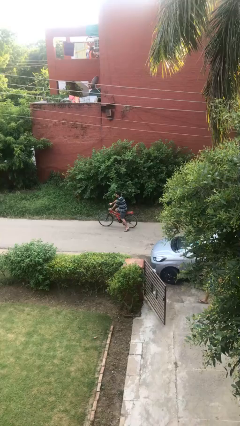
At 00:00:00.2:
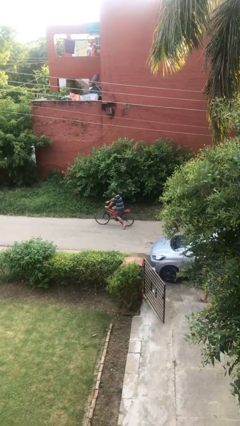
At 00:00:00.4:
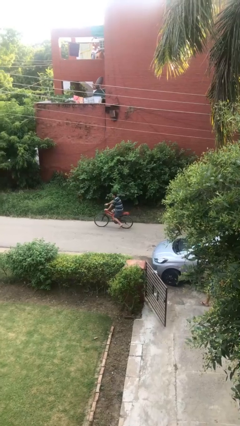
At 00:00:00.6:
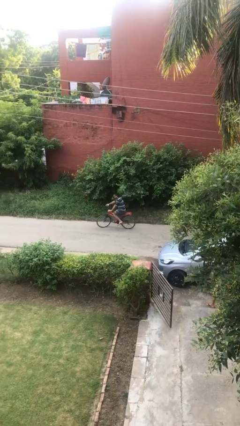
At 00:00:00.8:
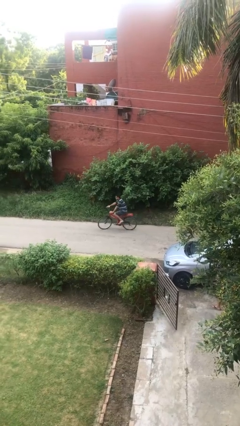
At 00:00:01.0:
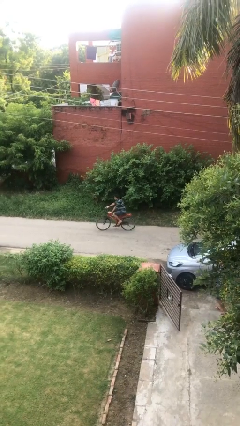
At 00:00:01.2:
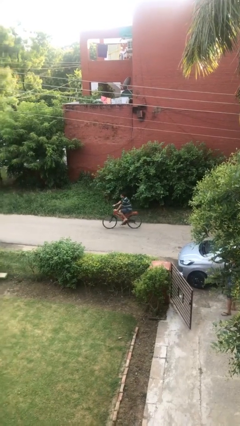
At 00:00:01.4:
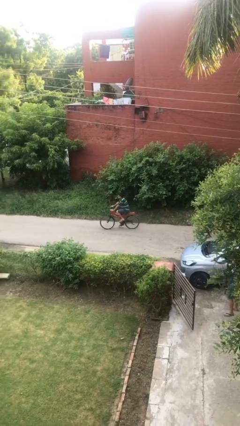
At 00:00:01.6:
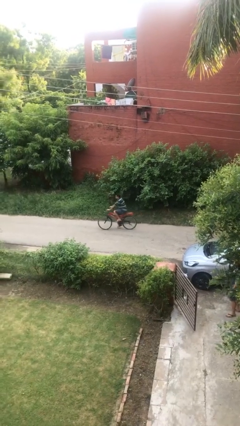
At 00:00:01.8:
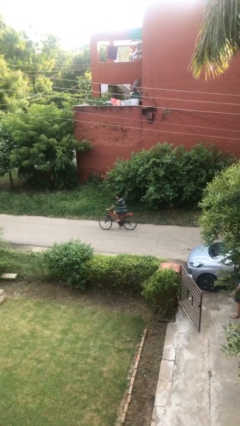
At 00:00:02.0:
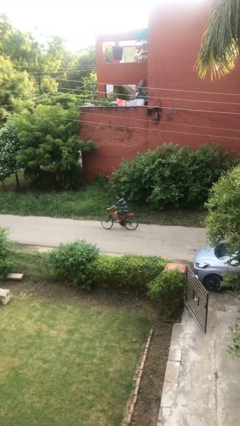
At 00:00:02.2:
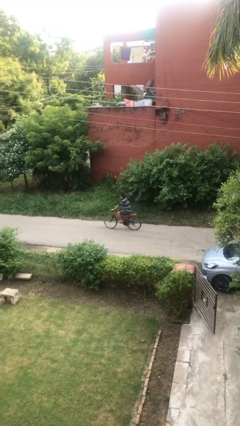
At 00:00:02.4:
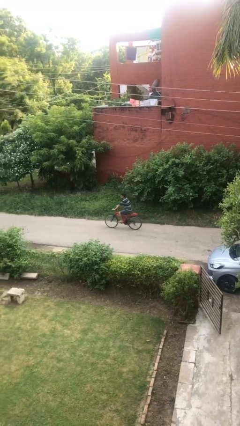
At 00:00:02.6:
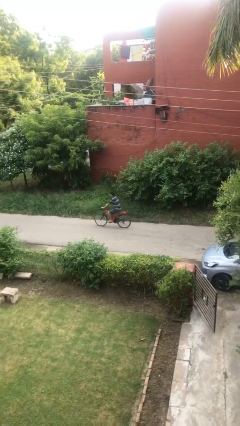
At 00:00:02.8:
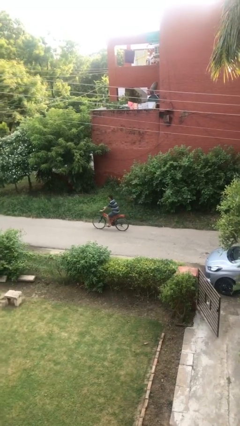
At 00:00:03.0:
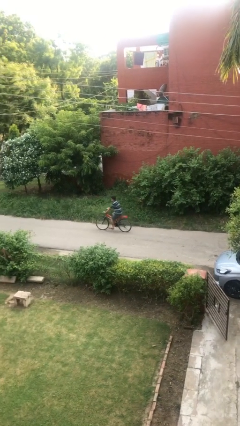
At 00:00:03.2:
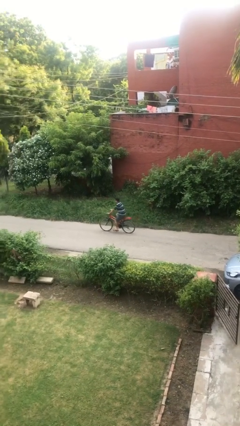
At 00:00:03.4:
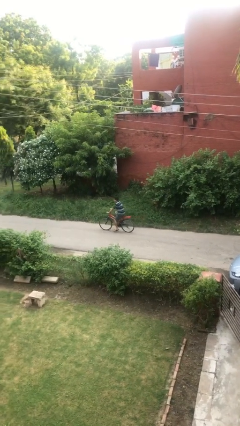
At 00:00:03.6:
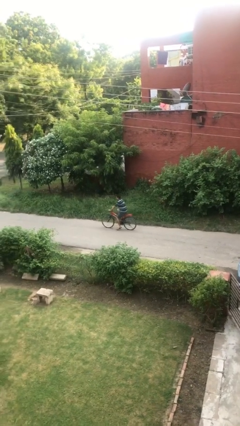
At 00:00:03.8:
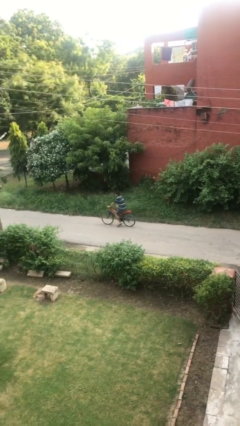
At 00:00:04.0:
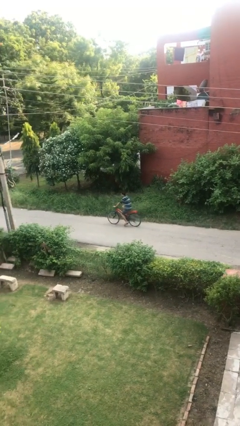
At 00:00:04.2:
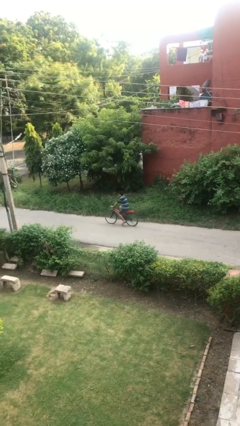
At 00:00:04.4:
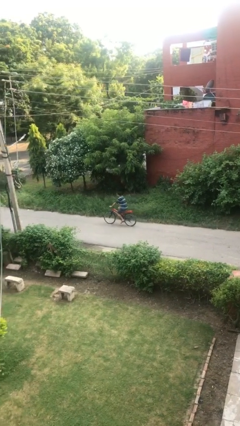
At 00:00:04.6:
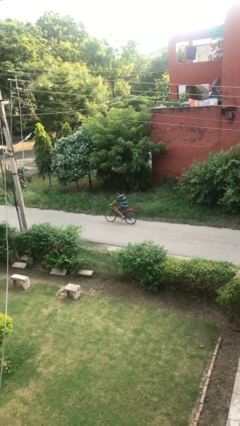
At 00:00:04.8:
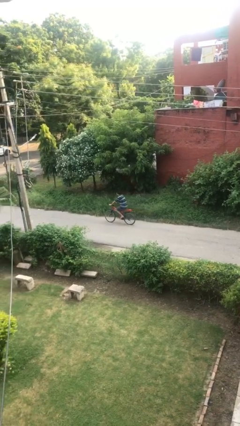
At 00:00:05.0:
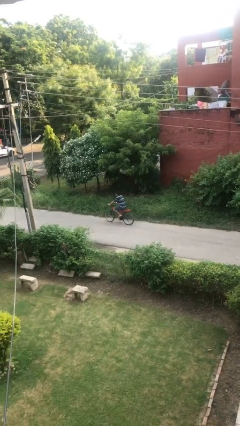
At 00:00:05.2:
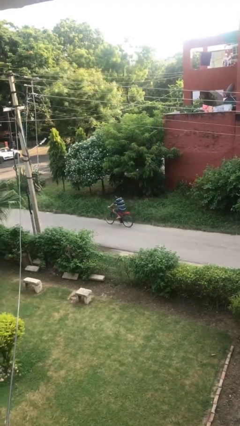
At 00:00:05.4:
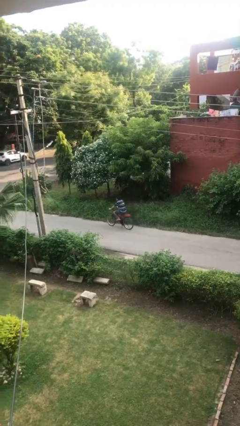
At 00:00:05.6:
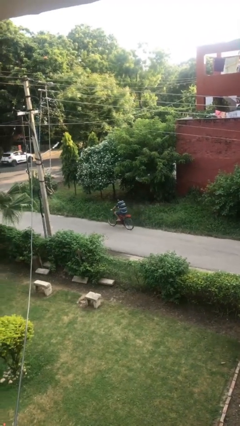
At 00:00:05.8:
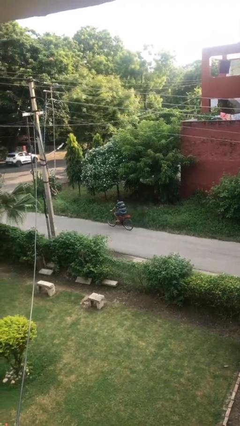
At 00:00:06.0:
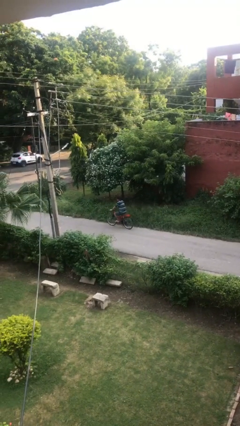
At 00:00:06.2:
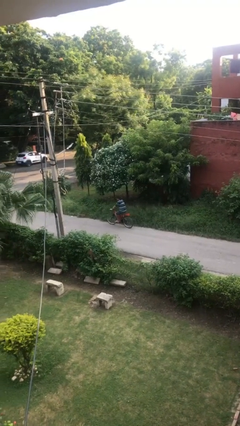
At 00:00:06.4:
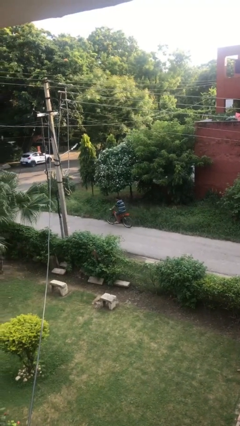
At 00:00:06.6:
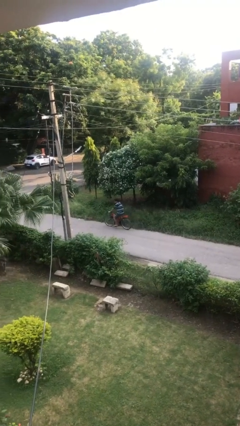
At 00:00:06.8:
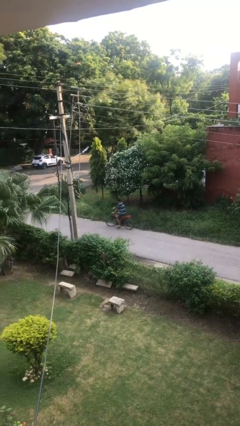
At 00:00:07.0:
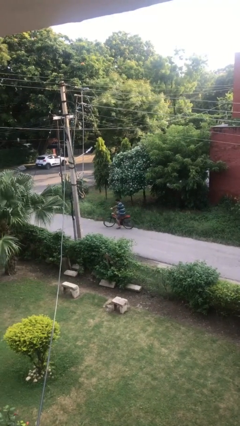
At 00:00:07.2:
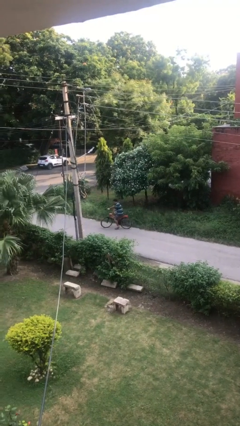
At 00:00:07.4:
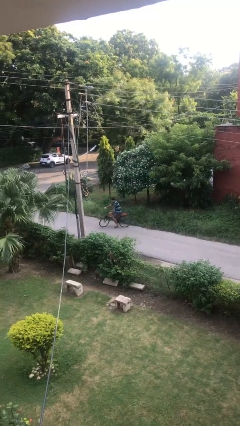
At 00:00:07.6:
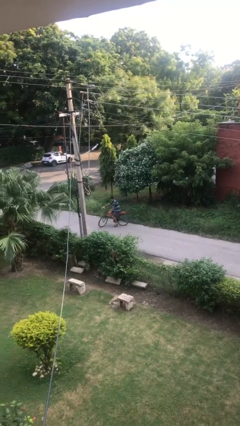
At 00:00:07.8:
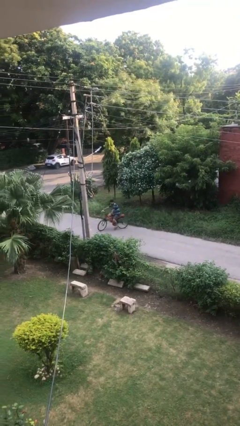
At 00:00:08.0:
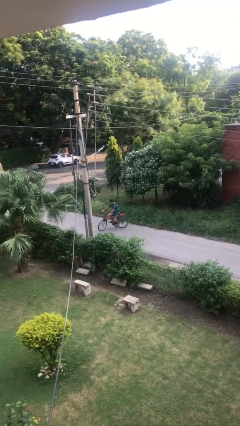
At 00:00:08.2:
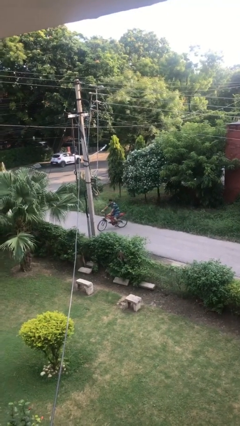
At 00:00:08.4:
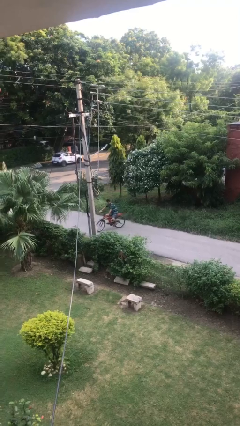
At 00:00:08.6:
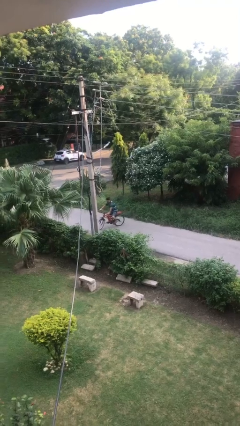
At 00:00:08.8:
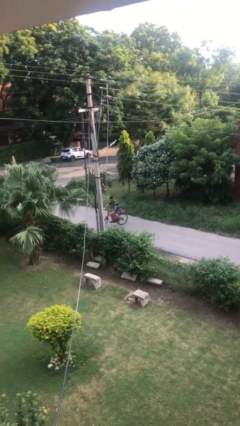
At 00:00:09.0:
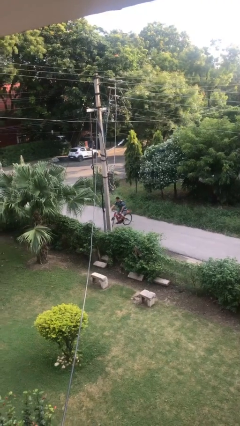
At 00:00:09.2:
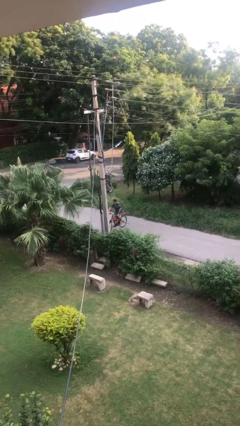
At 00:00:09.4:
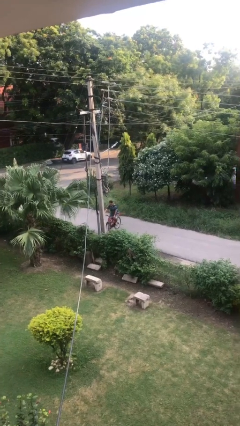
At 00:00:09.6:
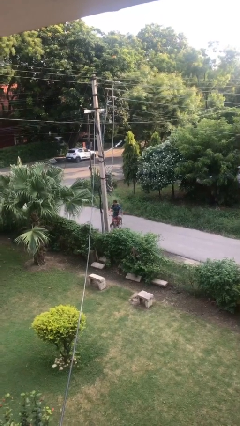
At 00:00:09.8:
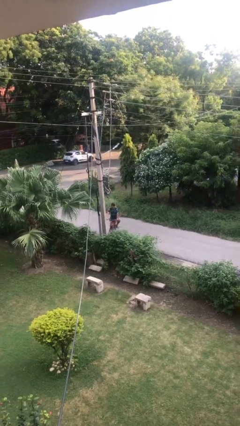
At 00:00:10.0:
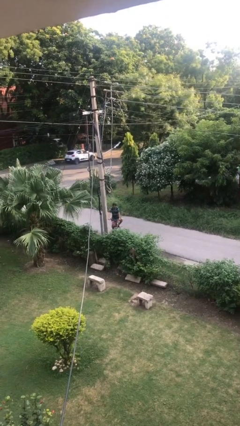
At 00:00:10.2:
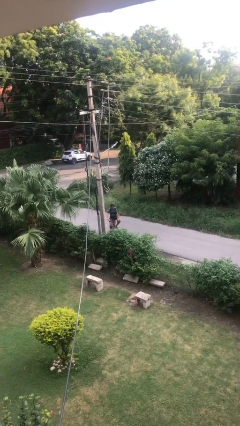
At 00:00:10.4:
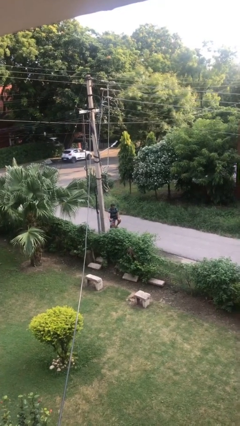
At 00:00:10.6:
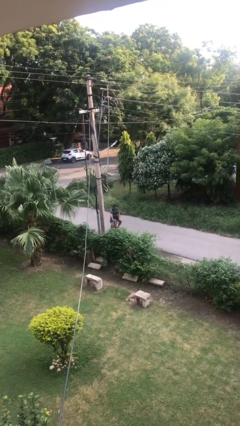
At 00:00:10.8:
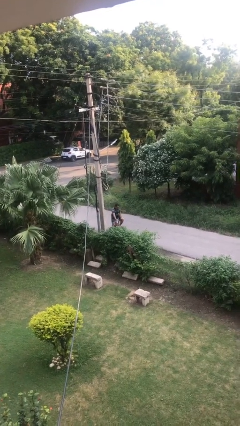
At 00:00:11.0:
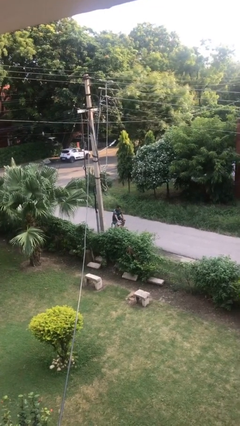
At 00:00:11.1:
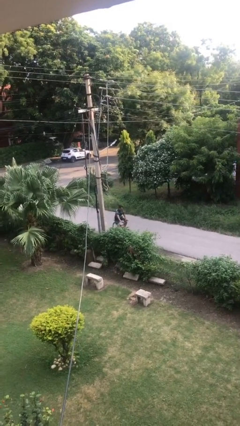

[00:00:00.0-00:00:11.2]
person rides bicycle

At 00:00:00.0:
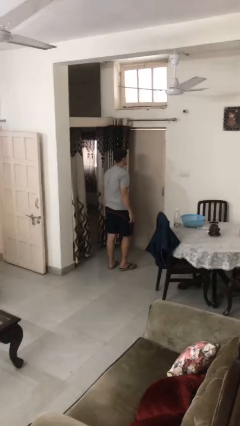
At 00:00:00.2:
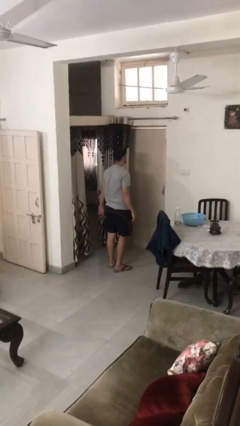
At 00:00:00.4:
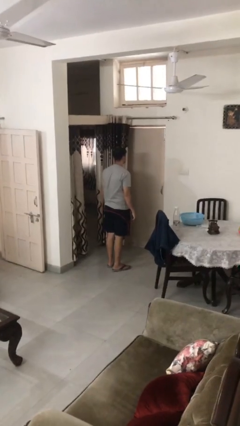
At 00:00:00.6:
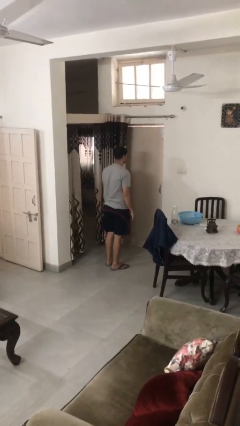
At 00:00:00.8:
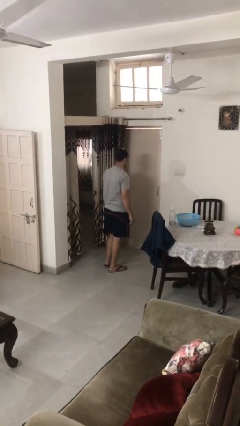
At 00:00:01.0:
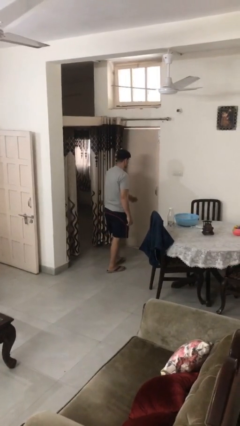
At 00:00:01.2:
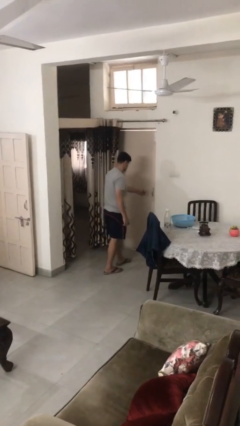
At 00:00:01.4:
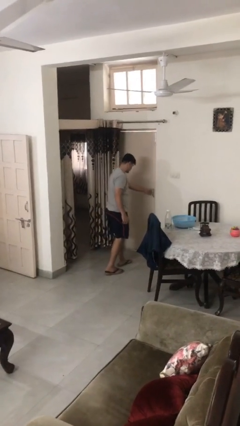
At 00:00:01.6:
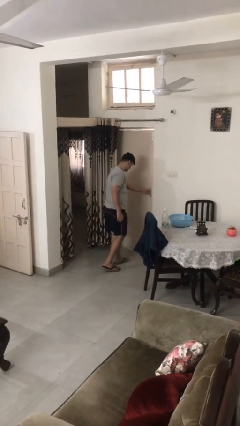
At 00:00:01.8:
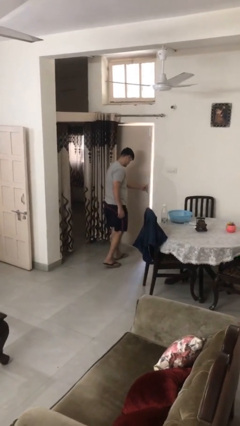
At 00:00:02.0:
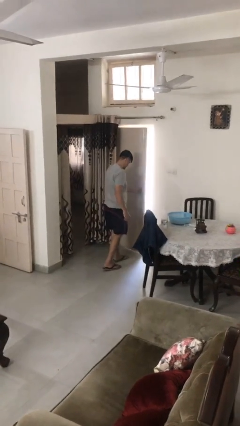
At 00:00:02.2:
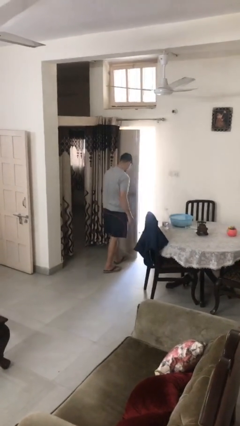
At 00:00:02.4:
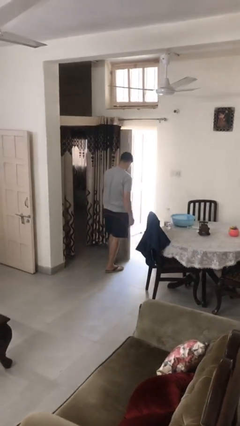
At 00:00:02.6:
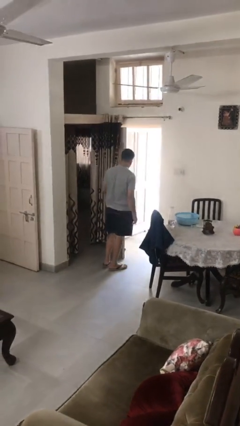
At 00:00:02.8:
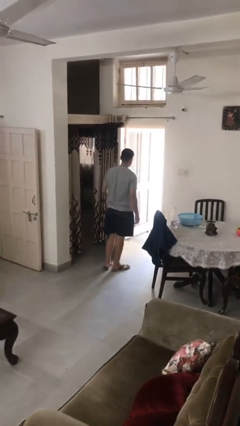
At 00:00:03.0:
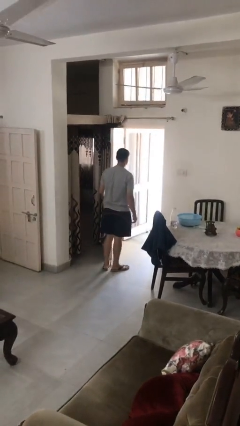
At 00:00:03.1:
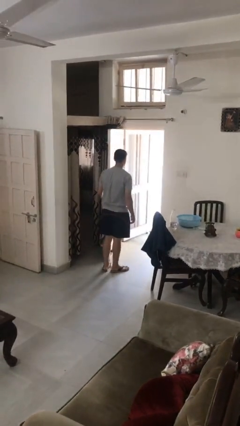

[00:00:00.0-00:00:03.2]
person opens facility door

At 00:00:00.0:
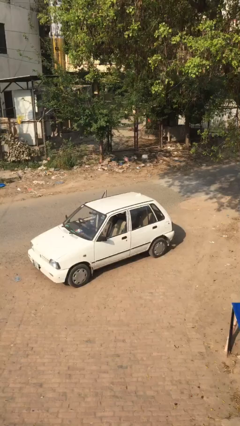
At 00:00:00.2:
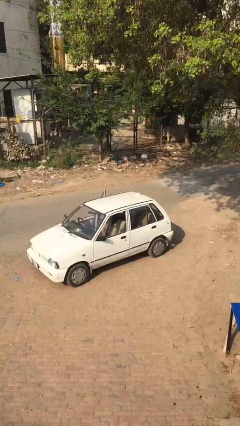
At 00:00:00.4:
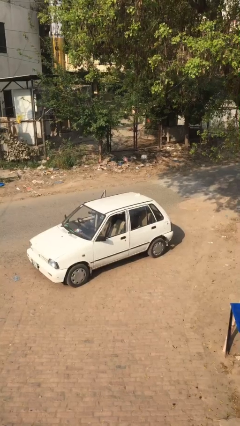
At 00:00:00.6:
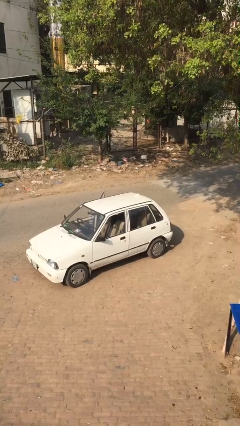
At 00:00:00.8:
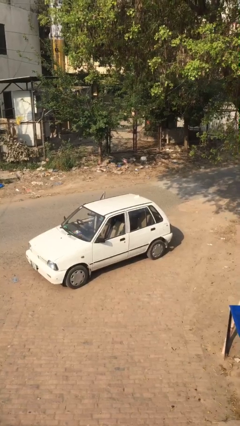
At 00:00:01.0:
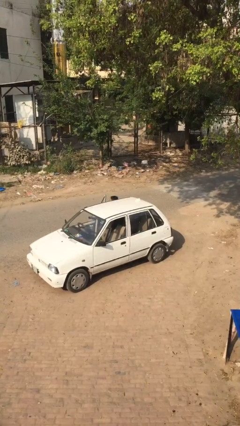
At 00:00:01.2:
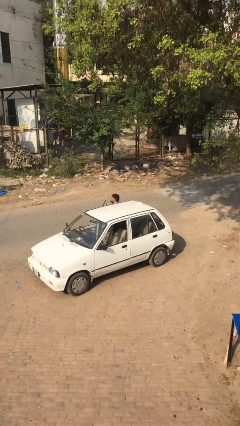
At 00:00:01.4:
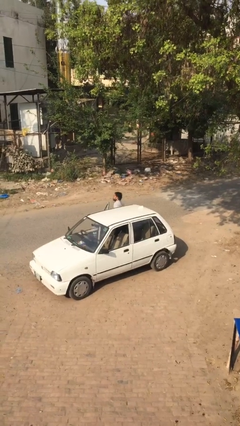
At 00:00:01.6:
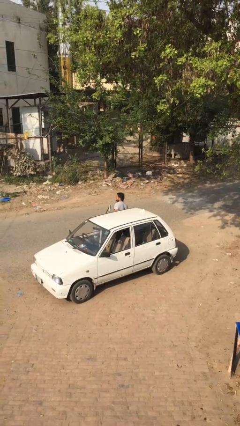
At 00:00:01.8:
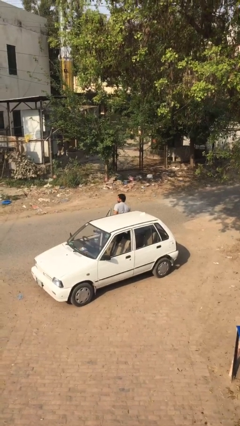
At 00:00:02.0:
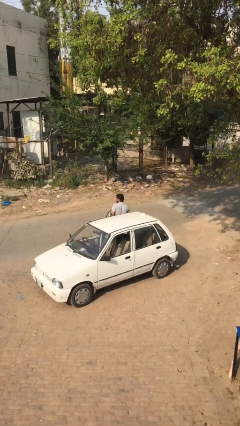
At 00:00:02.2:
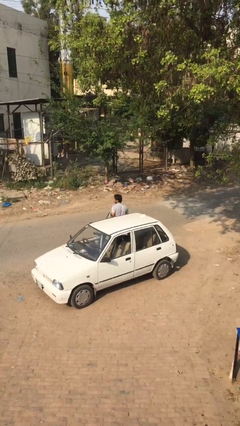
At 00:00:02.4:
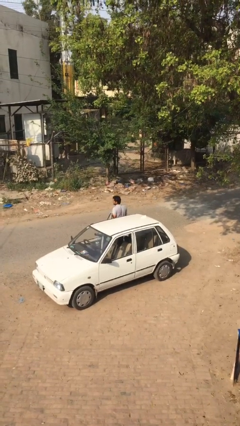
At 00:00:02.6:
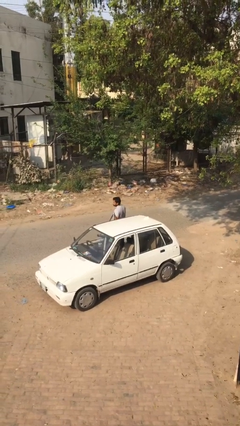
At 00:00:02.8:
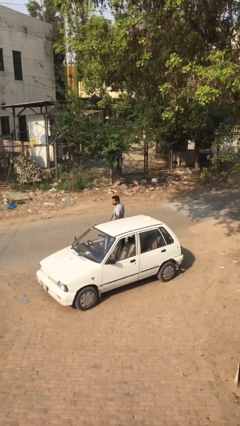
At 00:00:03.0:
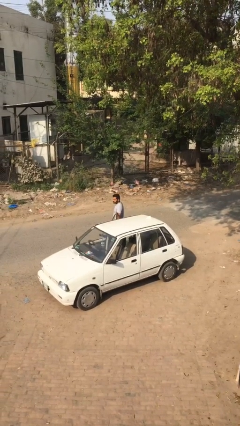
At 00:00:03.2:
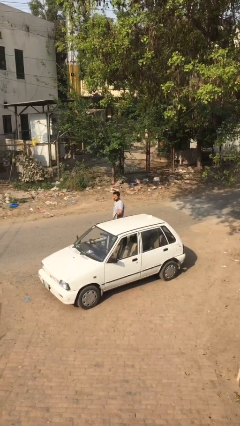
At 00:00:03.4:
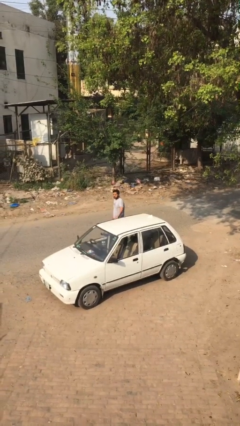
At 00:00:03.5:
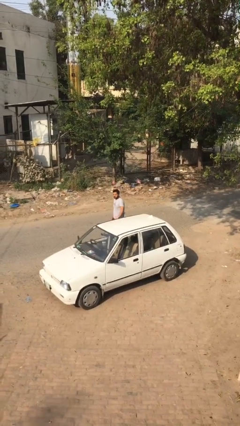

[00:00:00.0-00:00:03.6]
person exits car
